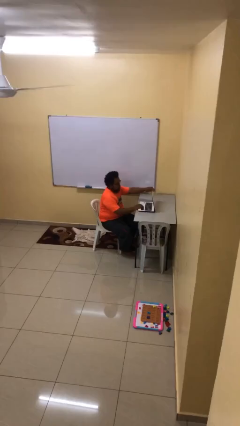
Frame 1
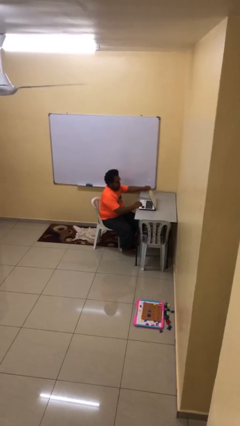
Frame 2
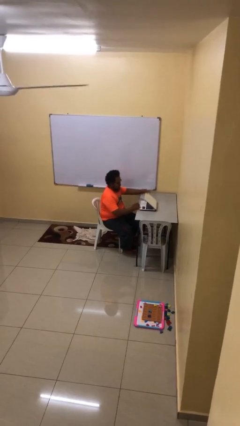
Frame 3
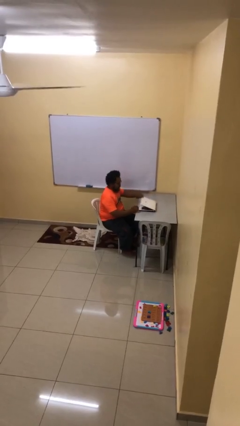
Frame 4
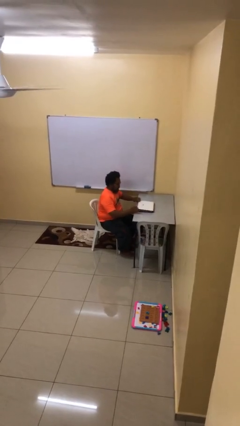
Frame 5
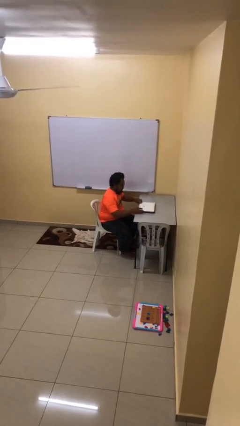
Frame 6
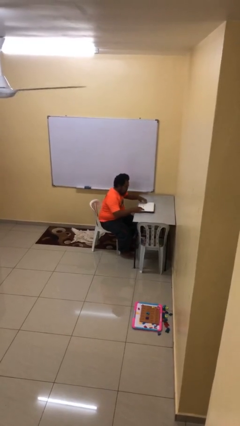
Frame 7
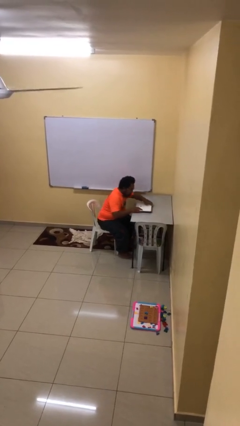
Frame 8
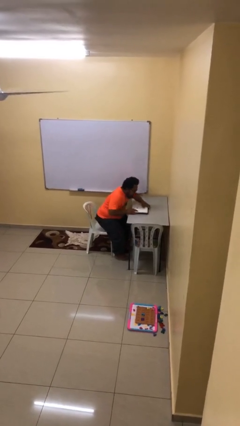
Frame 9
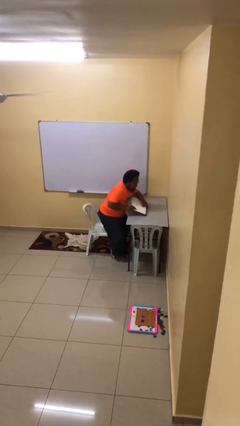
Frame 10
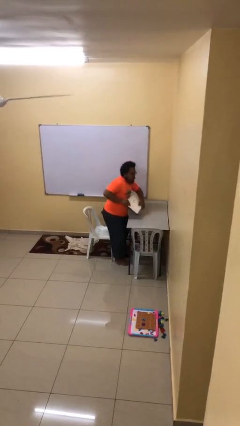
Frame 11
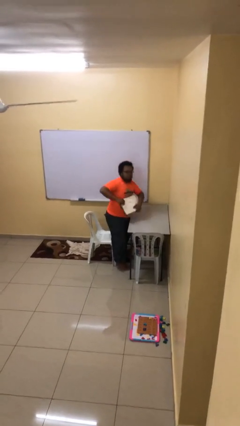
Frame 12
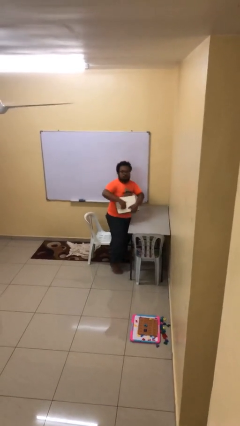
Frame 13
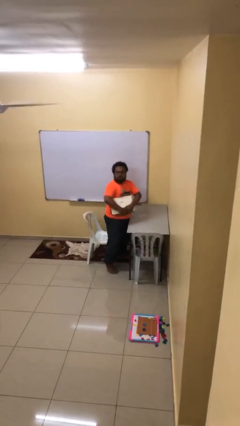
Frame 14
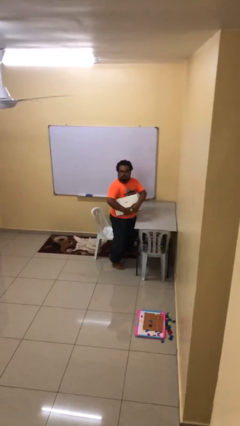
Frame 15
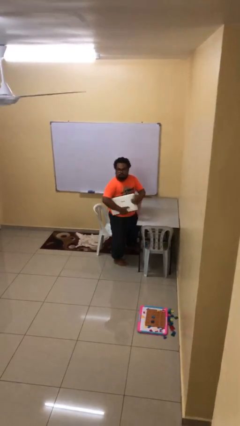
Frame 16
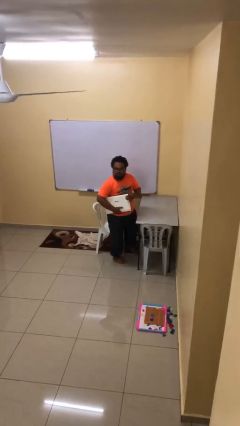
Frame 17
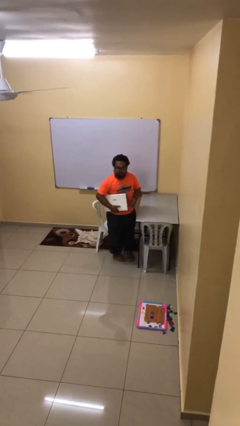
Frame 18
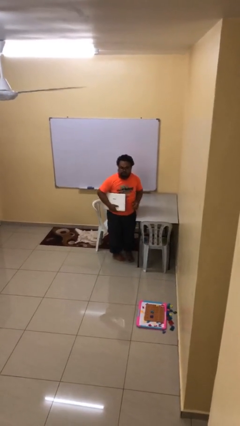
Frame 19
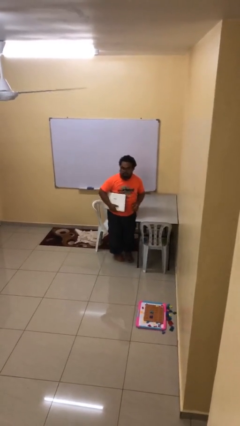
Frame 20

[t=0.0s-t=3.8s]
person stands up

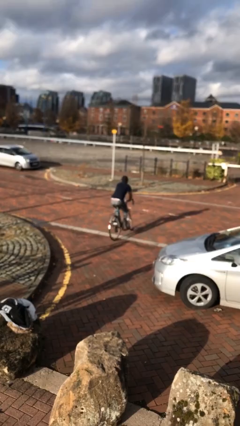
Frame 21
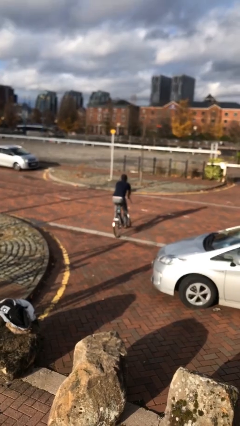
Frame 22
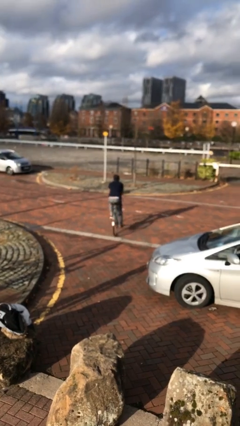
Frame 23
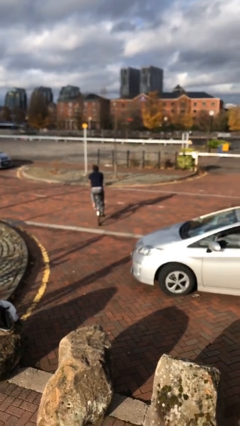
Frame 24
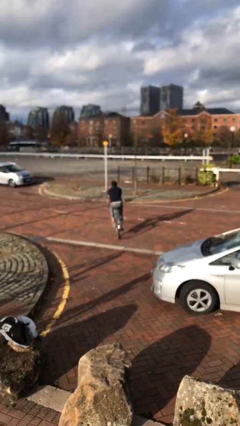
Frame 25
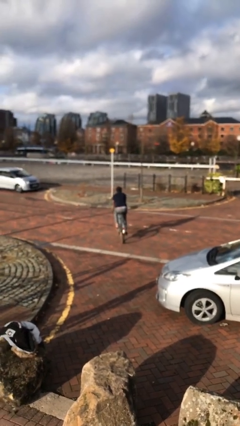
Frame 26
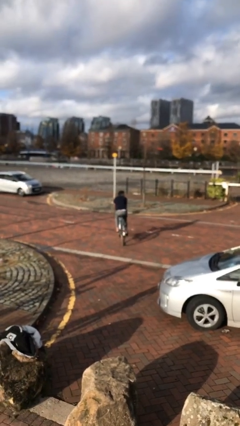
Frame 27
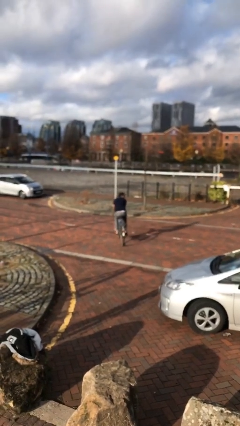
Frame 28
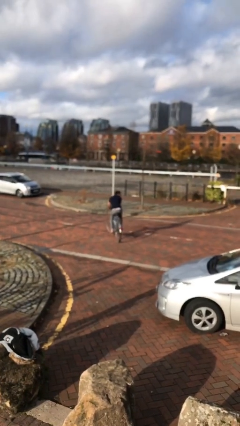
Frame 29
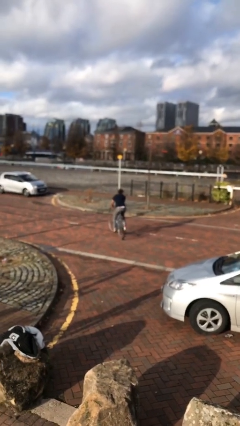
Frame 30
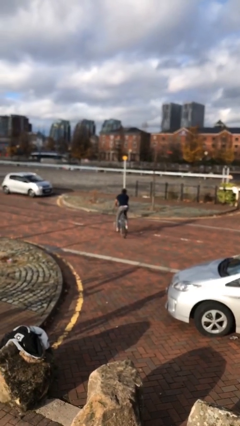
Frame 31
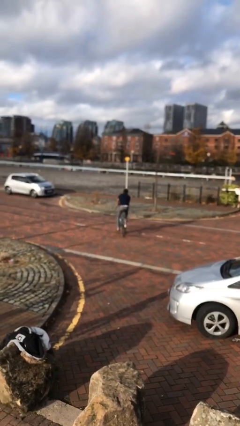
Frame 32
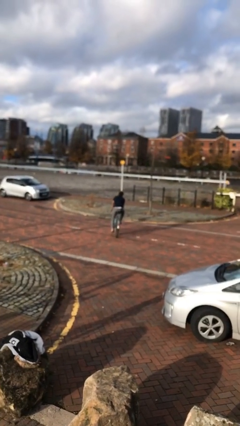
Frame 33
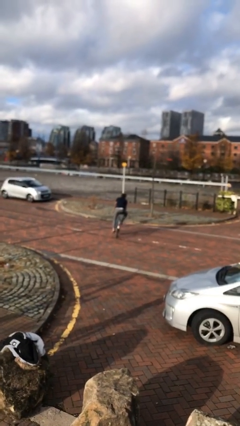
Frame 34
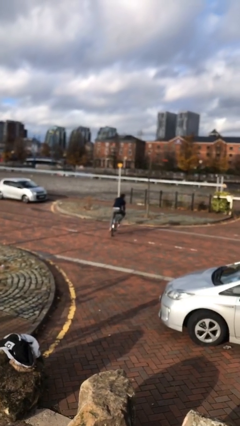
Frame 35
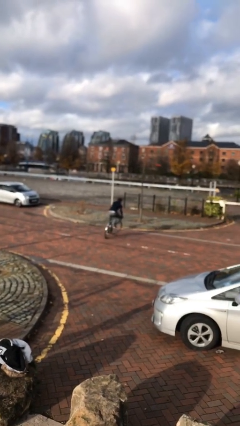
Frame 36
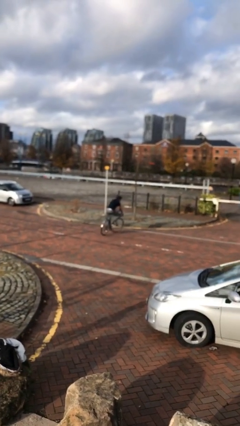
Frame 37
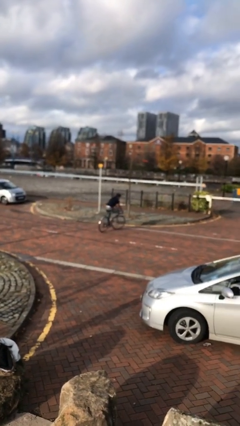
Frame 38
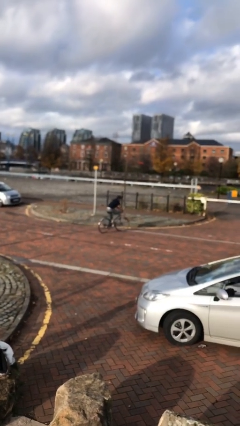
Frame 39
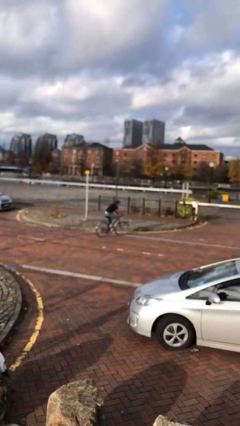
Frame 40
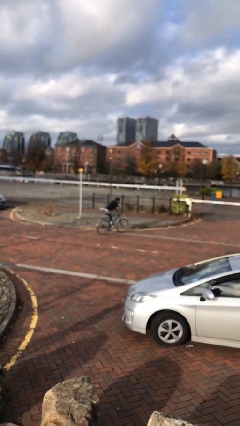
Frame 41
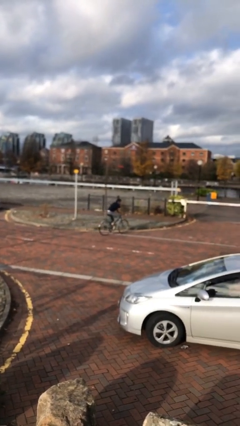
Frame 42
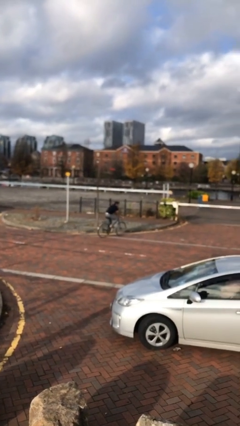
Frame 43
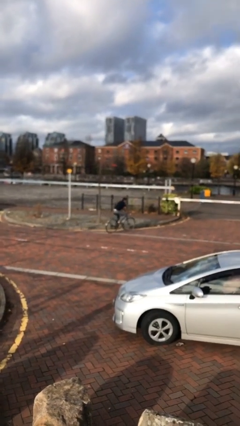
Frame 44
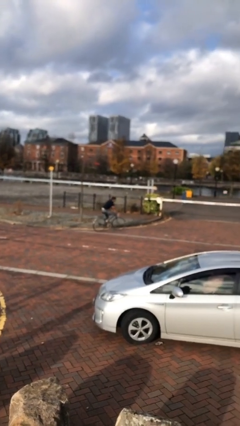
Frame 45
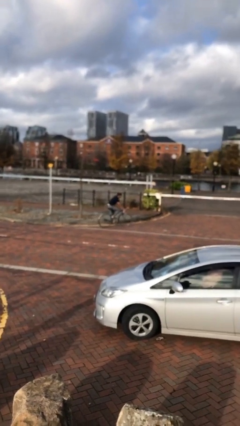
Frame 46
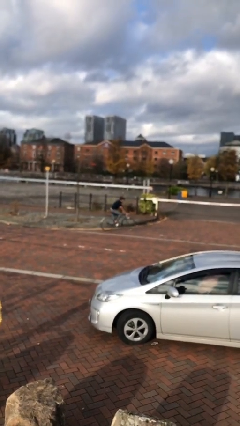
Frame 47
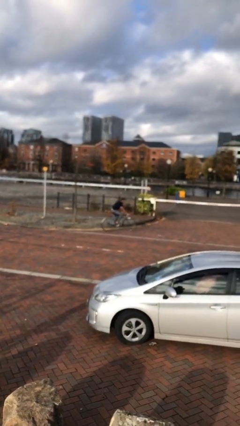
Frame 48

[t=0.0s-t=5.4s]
person rides bicycle

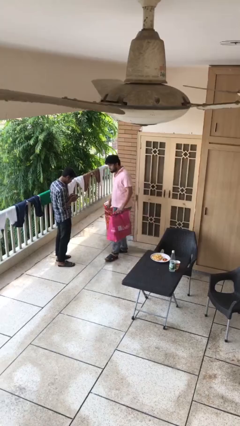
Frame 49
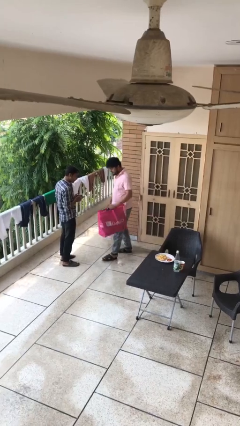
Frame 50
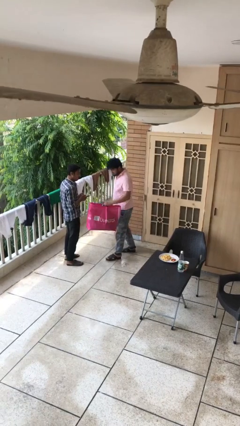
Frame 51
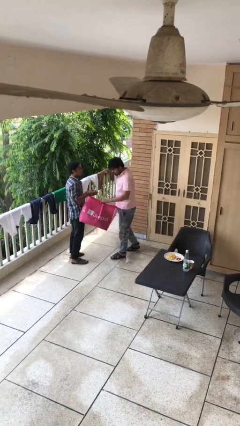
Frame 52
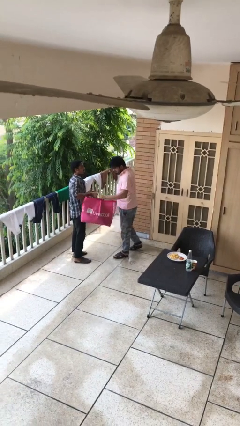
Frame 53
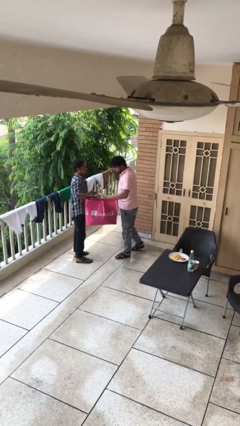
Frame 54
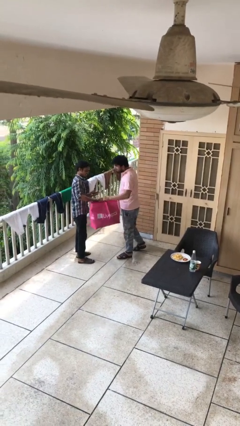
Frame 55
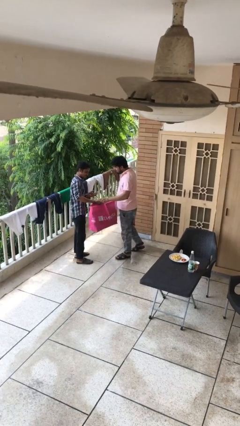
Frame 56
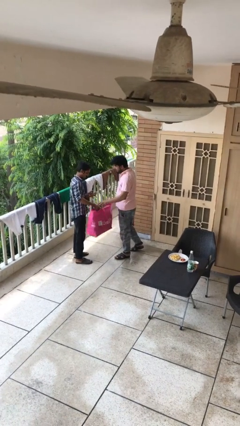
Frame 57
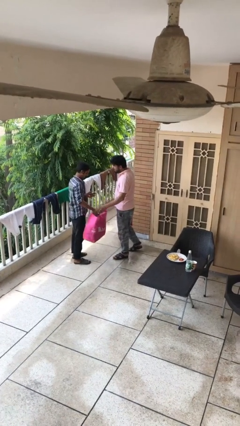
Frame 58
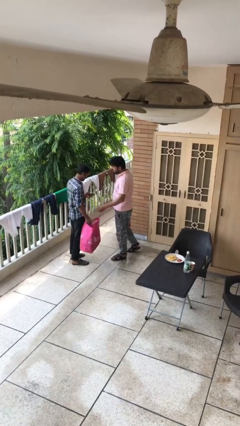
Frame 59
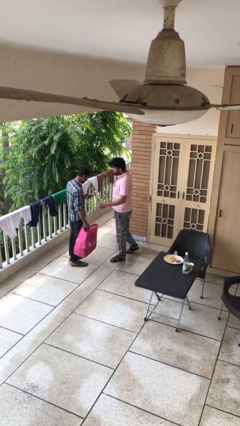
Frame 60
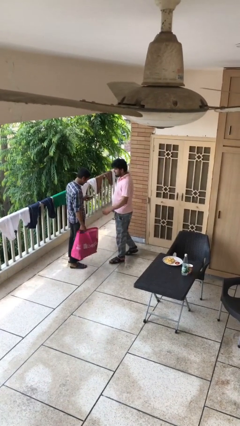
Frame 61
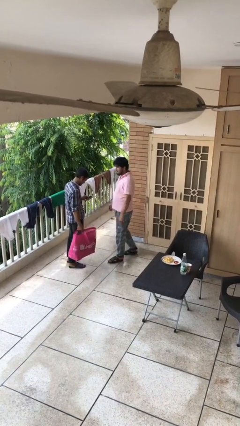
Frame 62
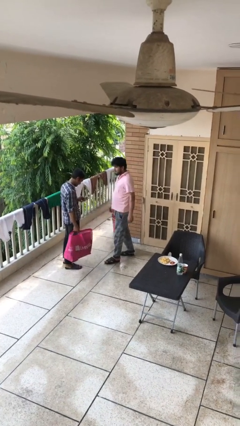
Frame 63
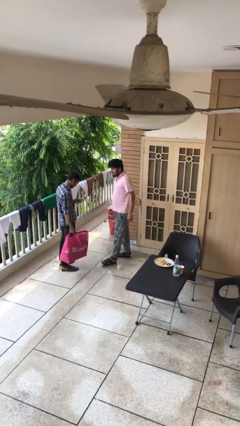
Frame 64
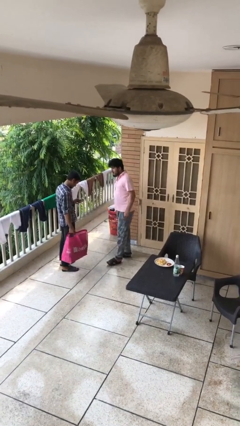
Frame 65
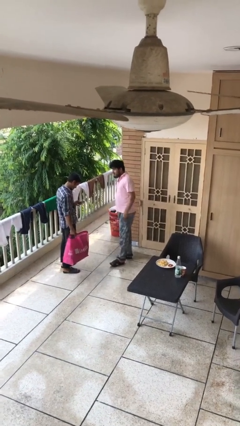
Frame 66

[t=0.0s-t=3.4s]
person transfers object to person

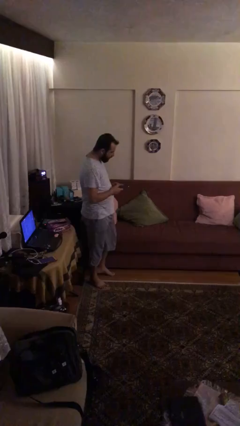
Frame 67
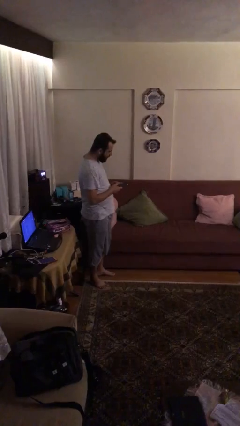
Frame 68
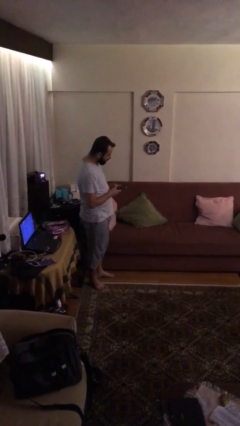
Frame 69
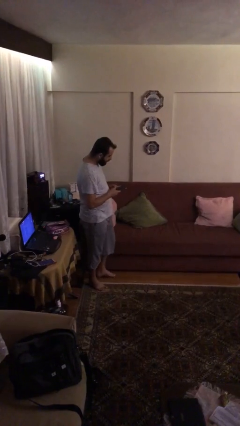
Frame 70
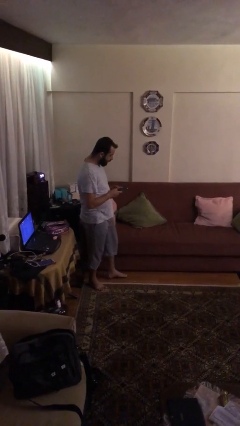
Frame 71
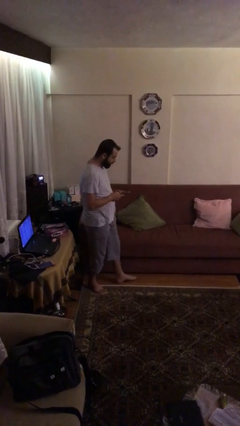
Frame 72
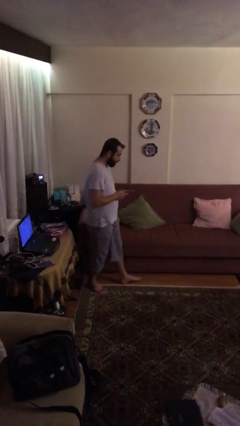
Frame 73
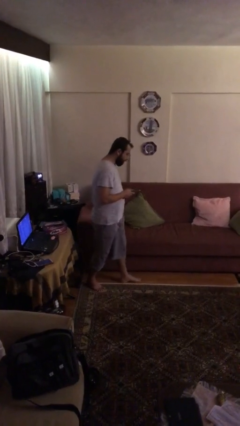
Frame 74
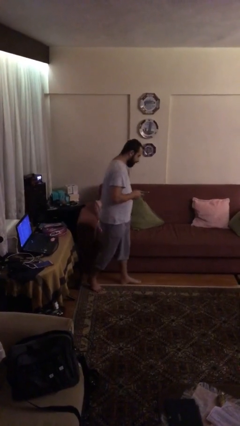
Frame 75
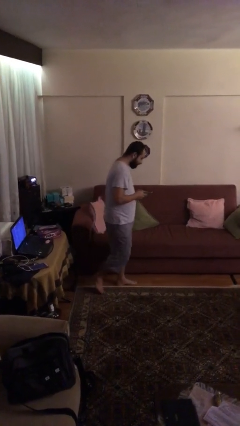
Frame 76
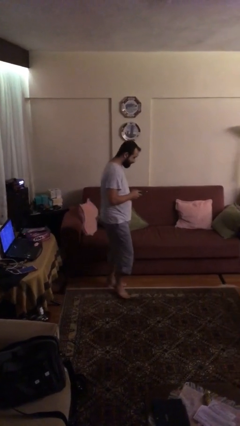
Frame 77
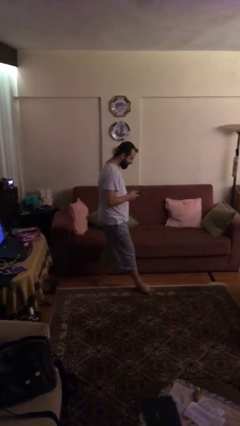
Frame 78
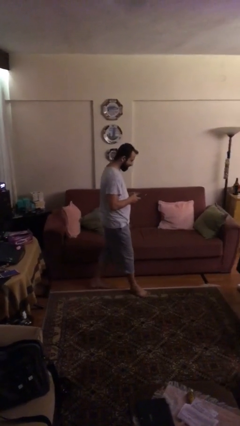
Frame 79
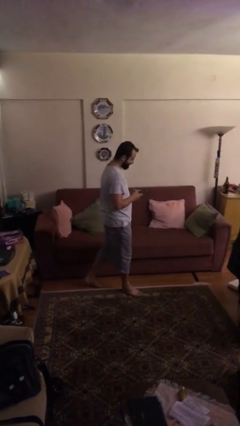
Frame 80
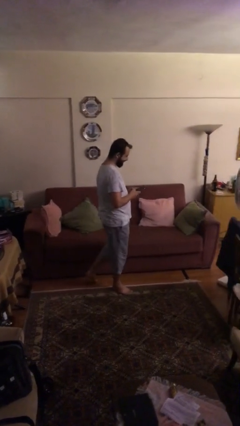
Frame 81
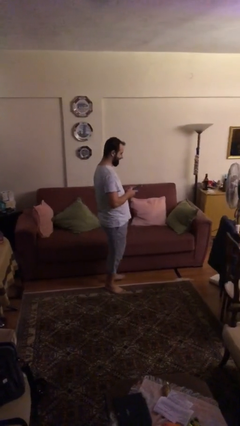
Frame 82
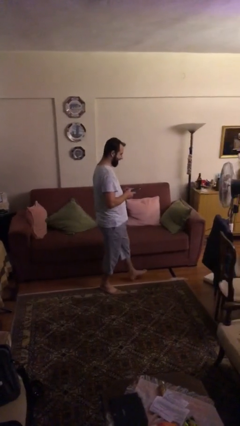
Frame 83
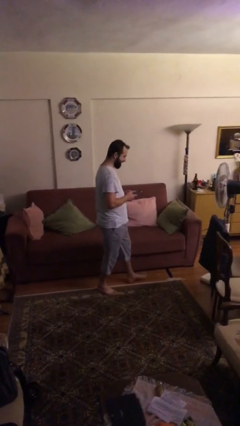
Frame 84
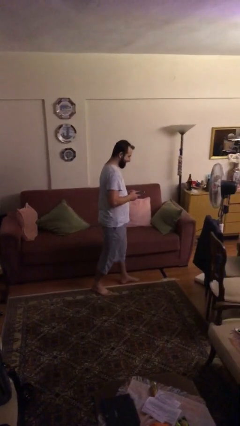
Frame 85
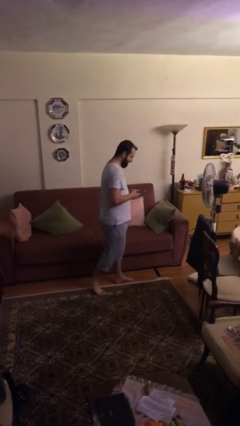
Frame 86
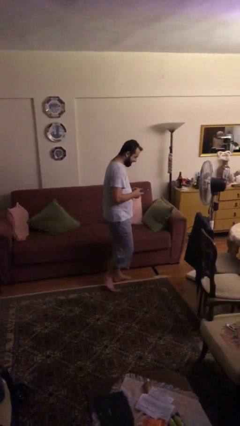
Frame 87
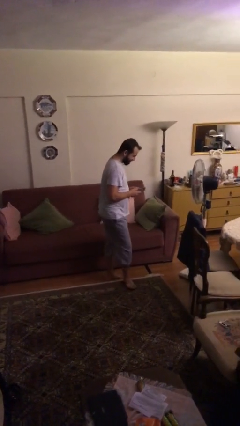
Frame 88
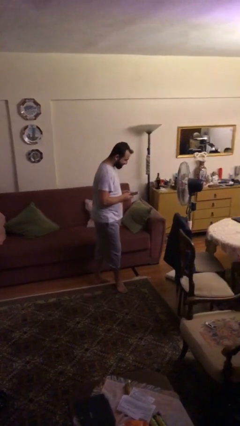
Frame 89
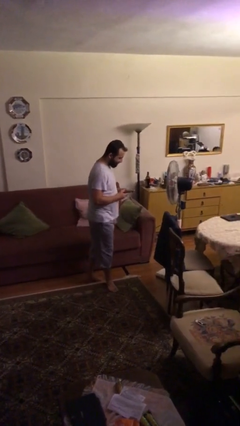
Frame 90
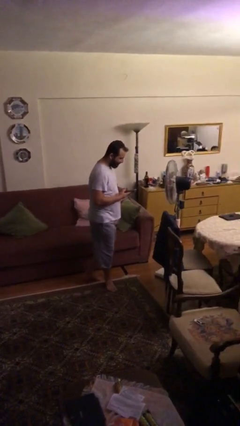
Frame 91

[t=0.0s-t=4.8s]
person texts on phone
